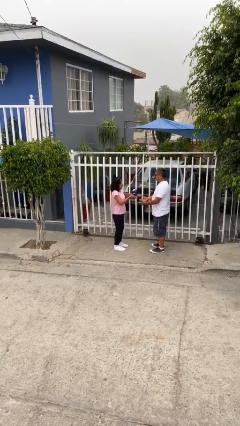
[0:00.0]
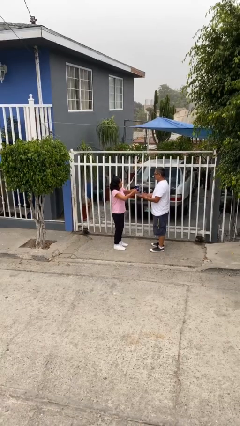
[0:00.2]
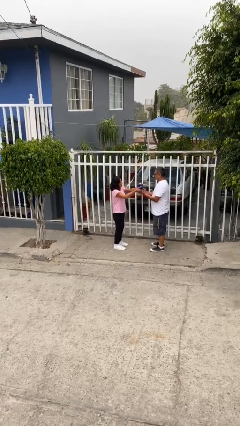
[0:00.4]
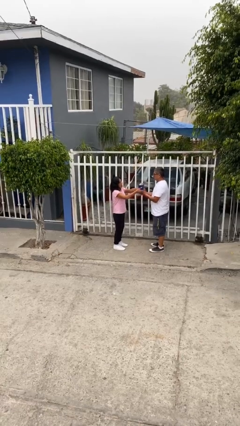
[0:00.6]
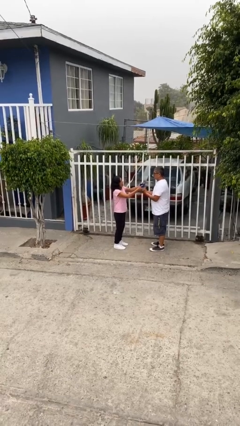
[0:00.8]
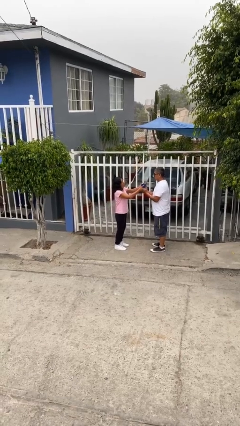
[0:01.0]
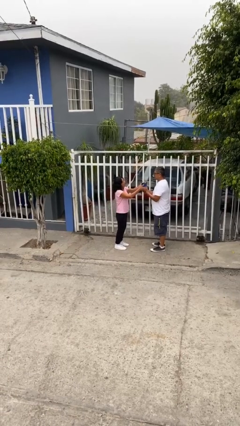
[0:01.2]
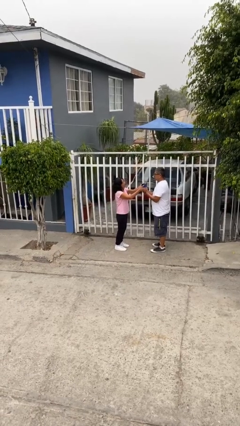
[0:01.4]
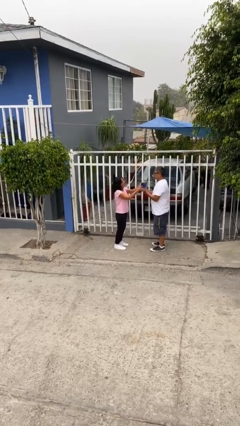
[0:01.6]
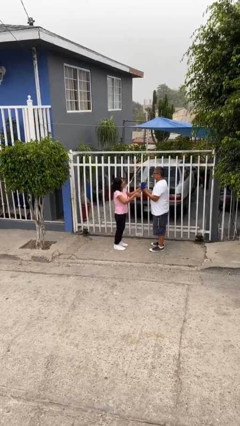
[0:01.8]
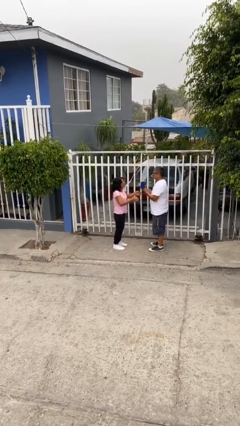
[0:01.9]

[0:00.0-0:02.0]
person transfers object to person

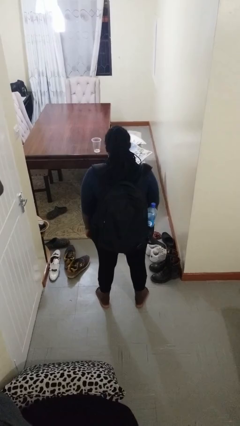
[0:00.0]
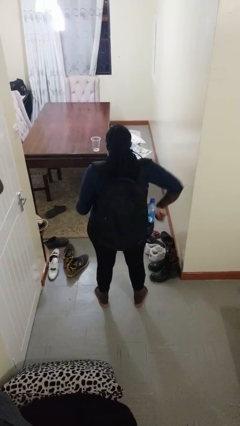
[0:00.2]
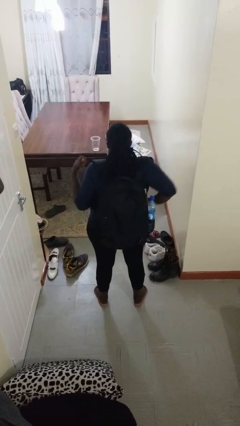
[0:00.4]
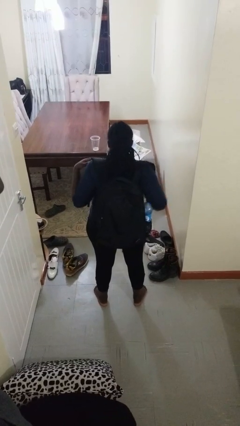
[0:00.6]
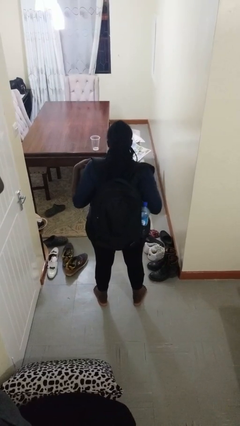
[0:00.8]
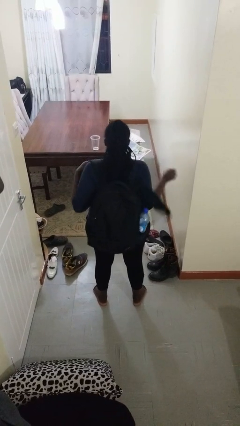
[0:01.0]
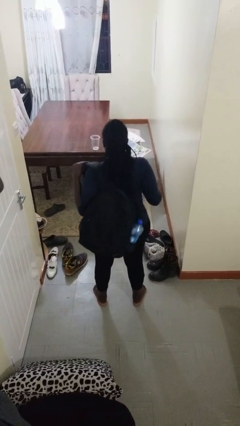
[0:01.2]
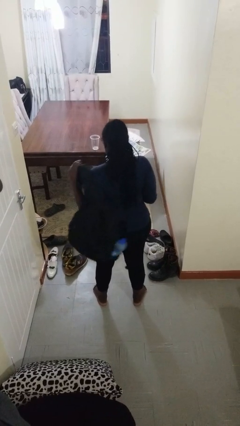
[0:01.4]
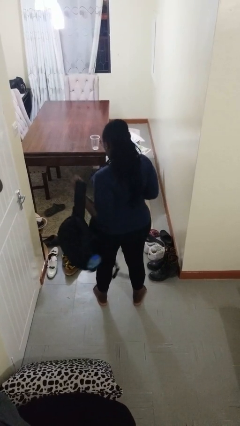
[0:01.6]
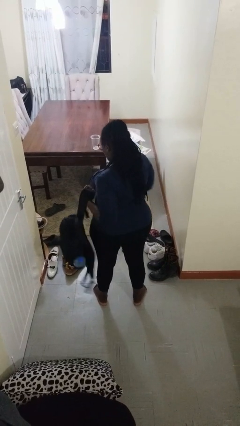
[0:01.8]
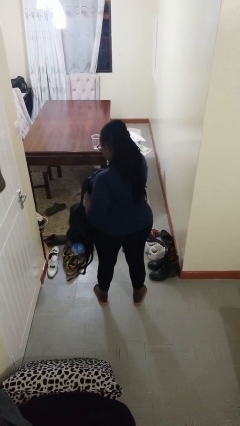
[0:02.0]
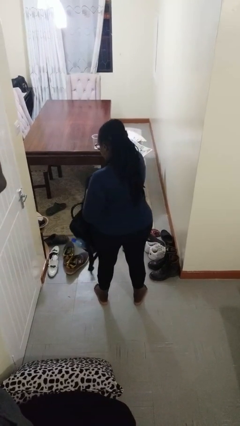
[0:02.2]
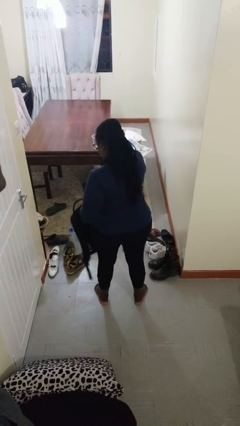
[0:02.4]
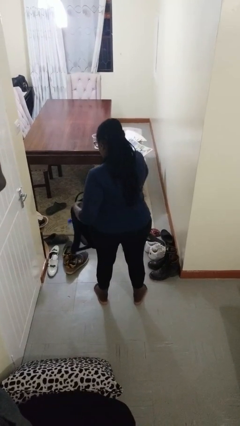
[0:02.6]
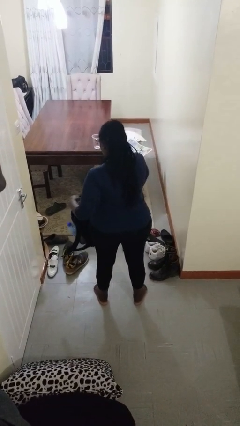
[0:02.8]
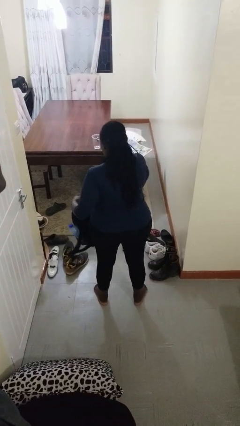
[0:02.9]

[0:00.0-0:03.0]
person takes off backpack

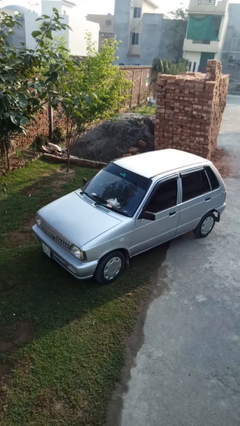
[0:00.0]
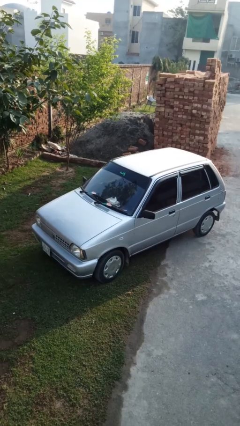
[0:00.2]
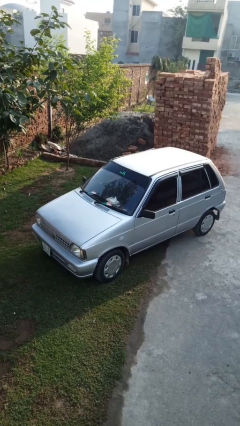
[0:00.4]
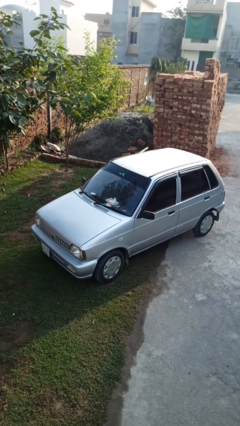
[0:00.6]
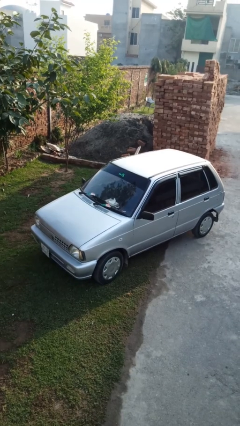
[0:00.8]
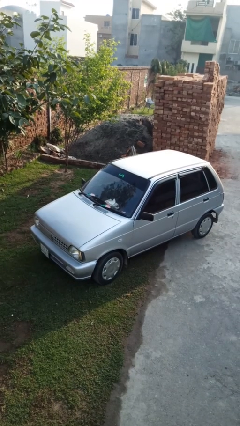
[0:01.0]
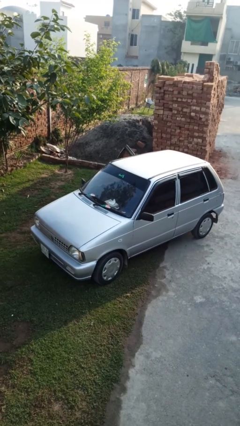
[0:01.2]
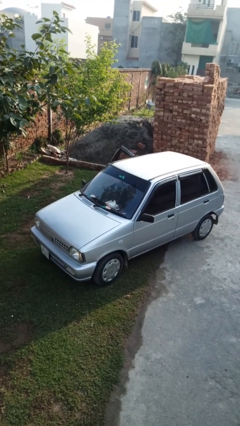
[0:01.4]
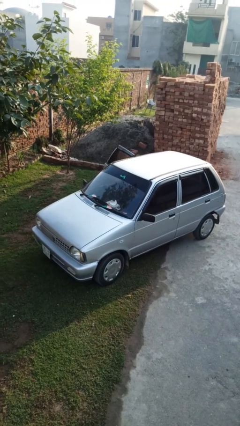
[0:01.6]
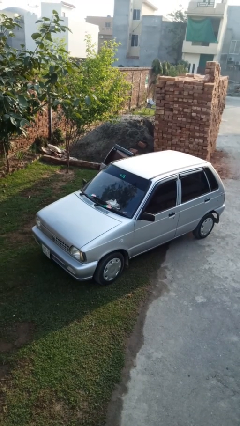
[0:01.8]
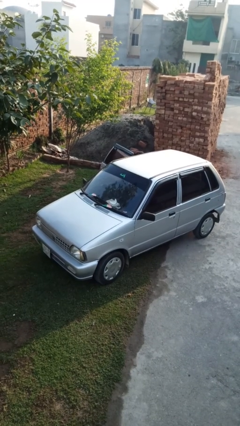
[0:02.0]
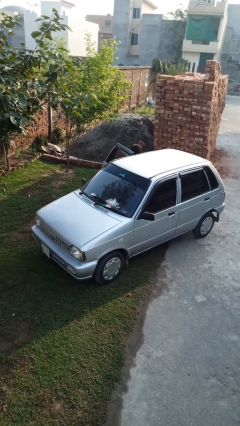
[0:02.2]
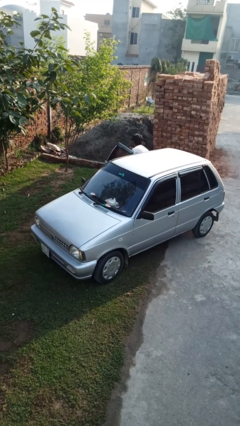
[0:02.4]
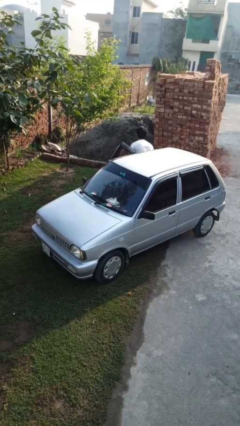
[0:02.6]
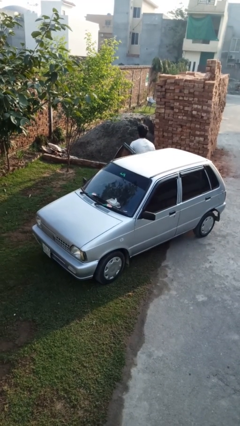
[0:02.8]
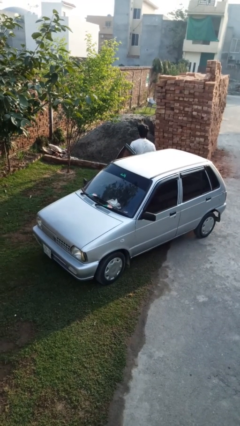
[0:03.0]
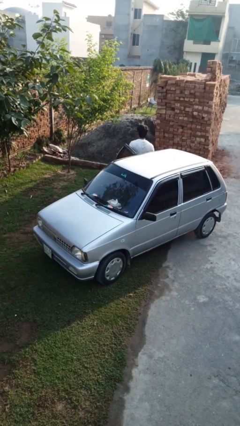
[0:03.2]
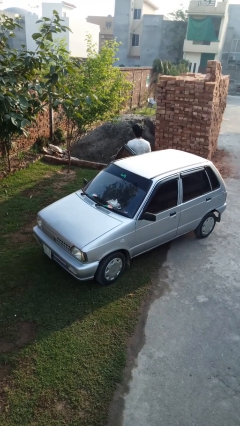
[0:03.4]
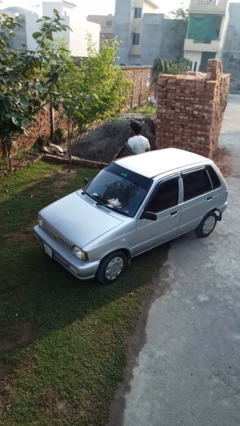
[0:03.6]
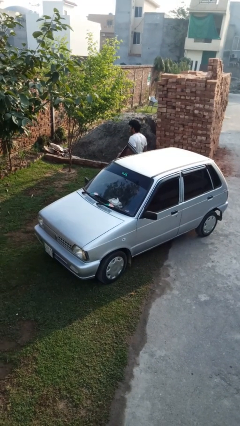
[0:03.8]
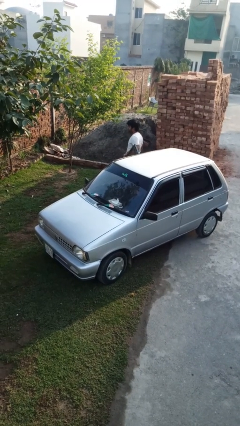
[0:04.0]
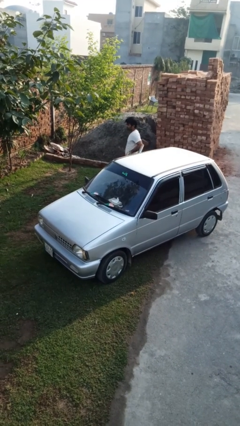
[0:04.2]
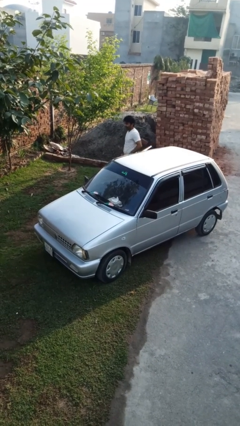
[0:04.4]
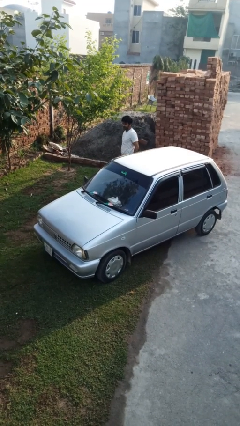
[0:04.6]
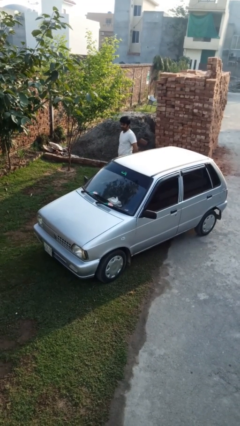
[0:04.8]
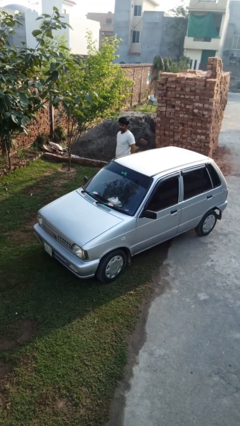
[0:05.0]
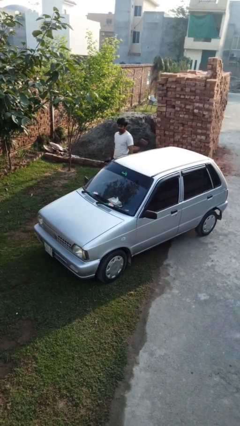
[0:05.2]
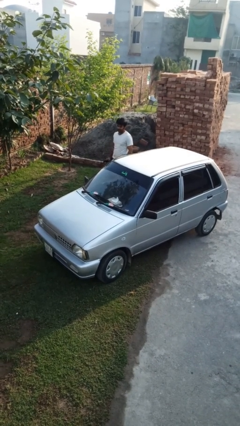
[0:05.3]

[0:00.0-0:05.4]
car drops off person

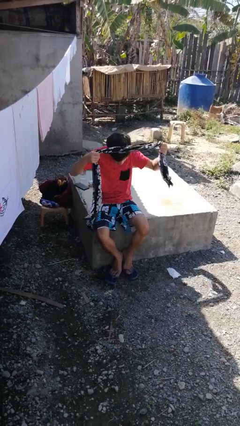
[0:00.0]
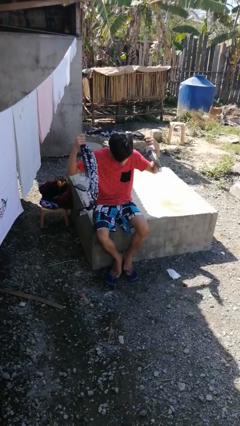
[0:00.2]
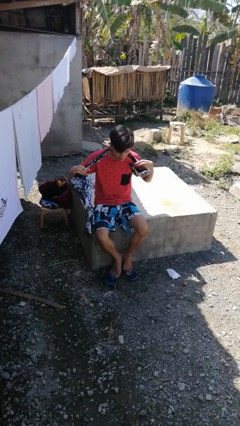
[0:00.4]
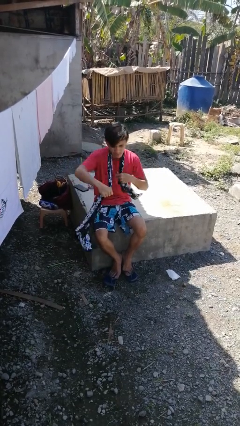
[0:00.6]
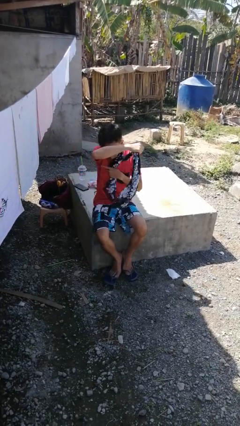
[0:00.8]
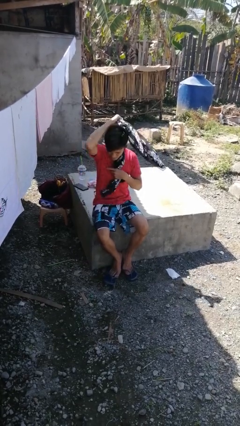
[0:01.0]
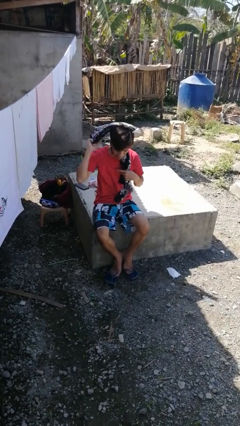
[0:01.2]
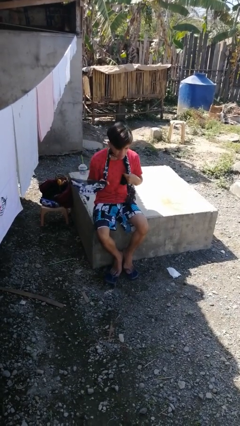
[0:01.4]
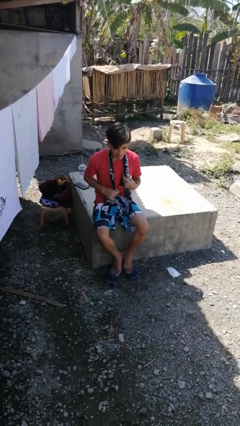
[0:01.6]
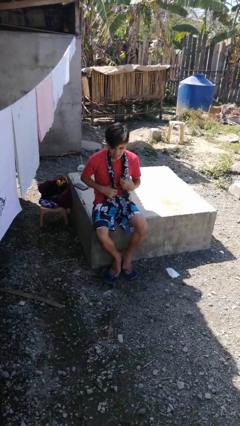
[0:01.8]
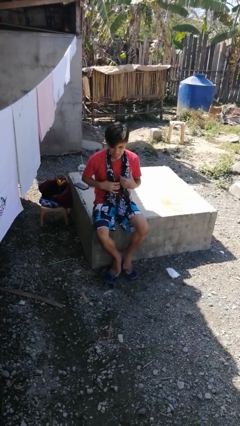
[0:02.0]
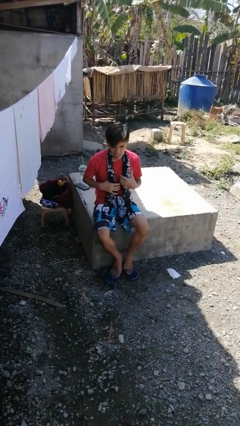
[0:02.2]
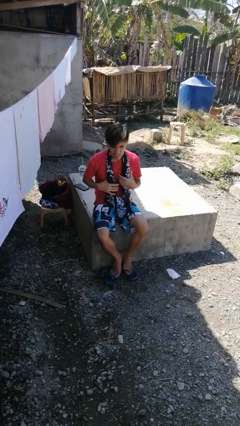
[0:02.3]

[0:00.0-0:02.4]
person puts on scarf

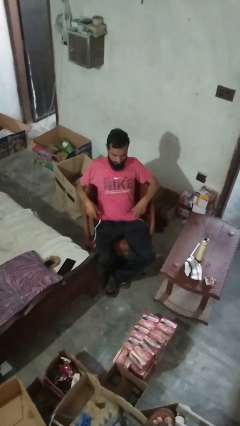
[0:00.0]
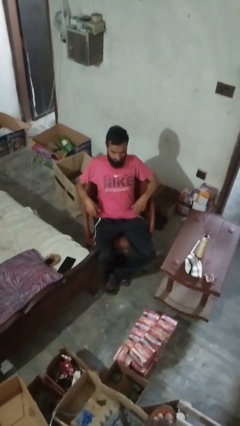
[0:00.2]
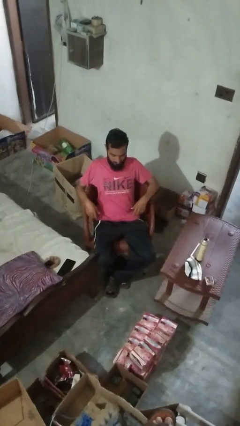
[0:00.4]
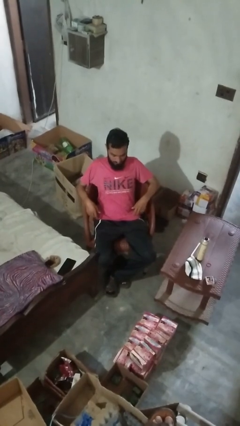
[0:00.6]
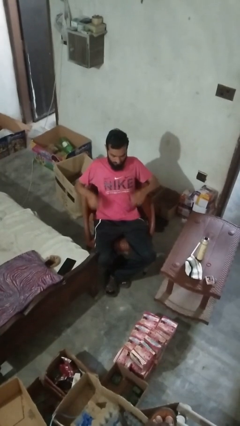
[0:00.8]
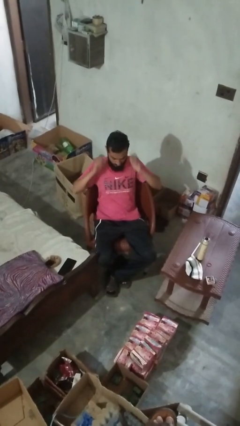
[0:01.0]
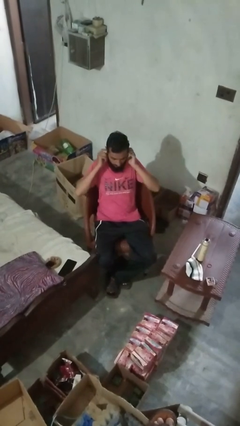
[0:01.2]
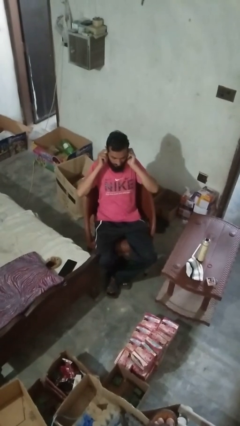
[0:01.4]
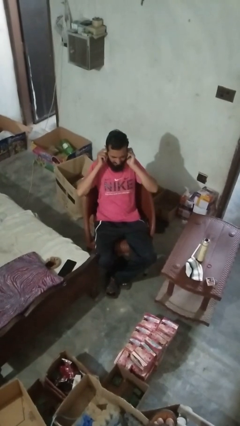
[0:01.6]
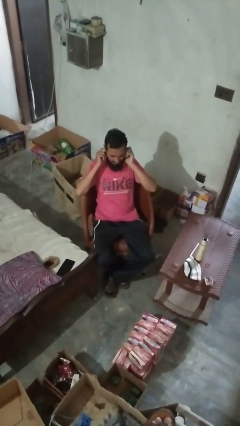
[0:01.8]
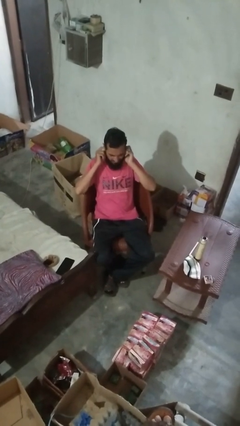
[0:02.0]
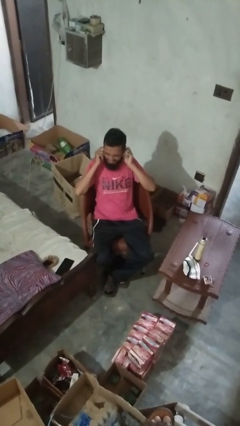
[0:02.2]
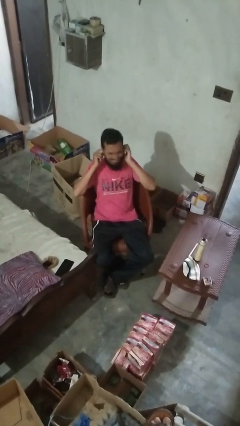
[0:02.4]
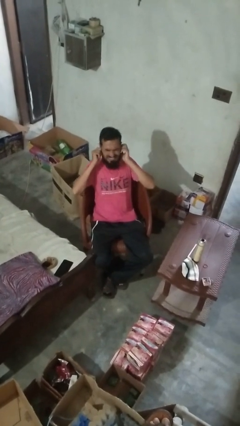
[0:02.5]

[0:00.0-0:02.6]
person puts fingers in ear

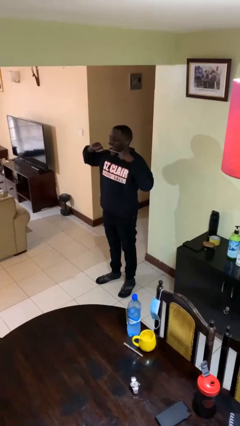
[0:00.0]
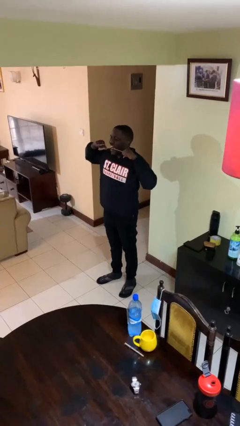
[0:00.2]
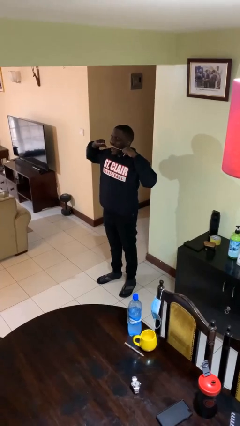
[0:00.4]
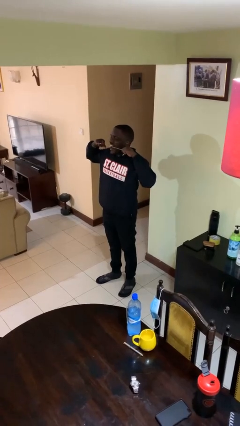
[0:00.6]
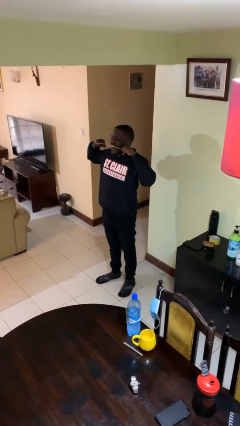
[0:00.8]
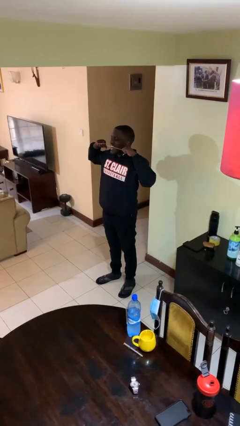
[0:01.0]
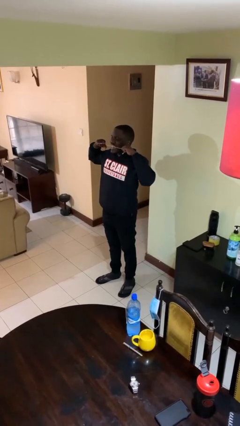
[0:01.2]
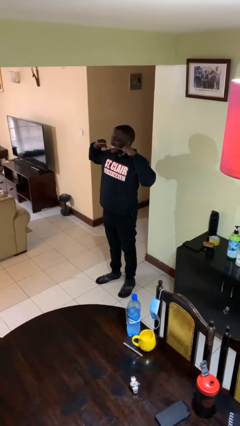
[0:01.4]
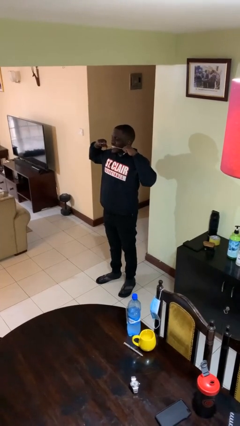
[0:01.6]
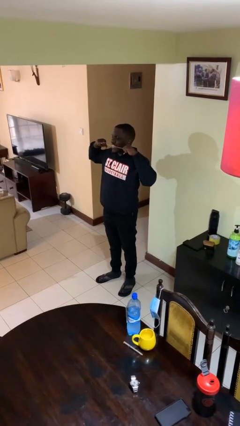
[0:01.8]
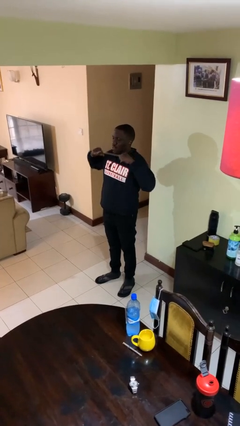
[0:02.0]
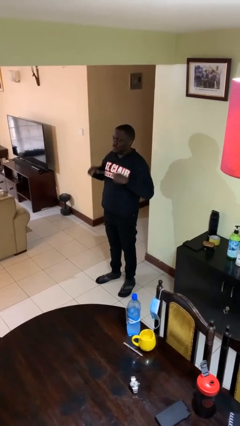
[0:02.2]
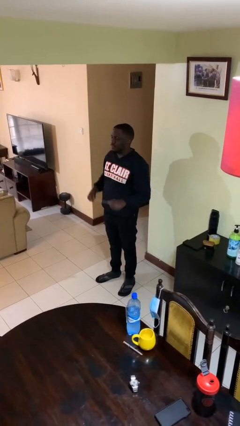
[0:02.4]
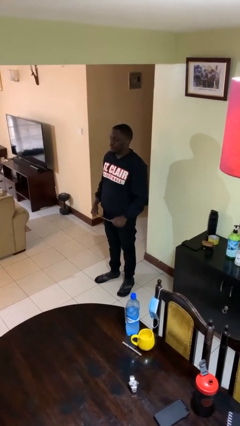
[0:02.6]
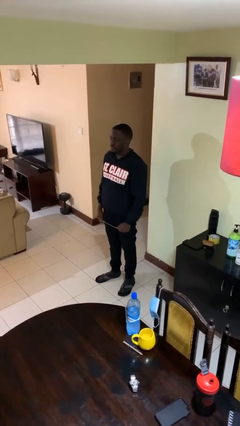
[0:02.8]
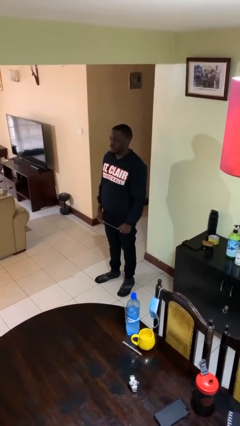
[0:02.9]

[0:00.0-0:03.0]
person flosses
